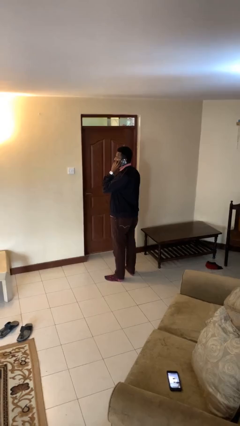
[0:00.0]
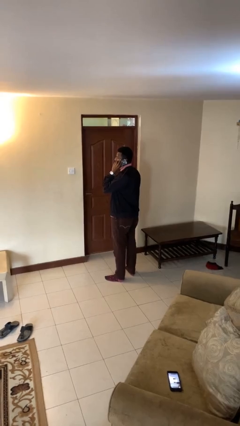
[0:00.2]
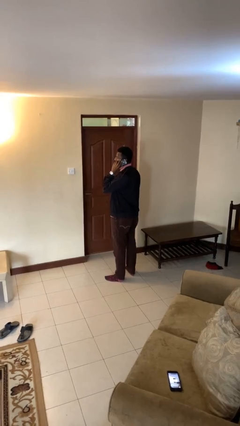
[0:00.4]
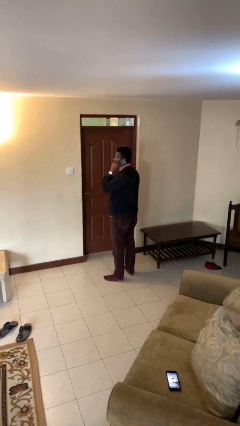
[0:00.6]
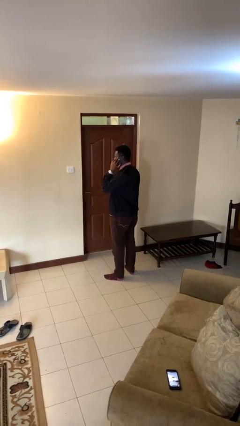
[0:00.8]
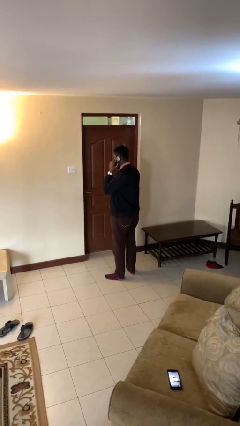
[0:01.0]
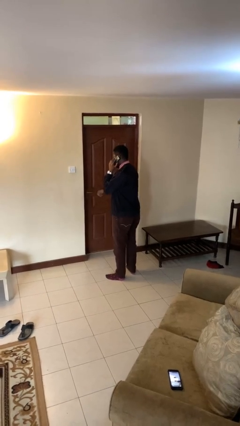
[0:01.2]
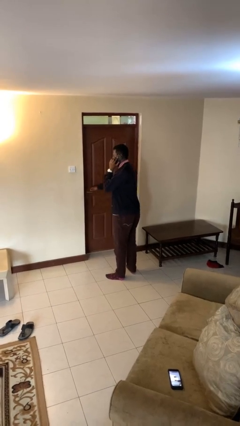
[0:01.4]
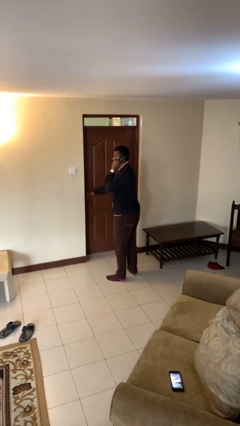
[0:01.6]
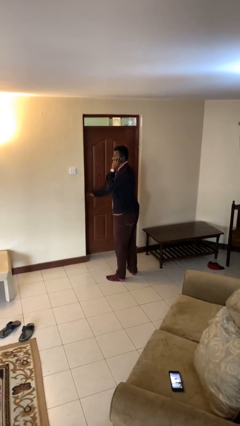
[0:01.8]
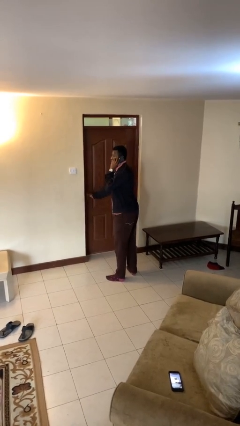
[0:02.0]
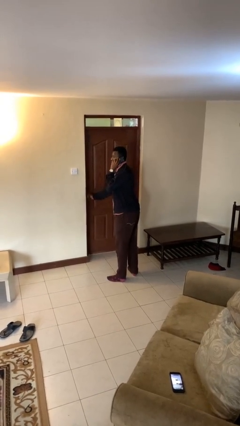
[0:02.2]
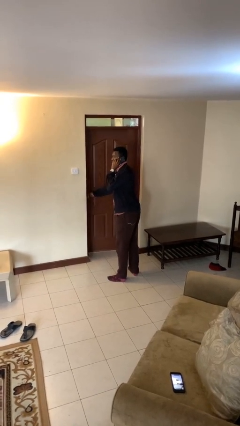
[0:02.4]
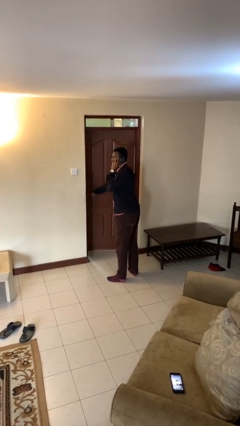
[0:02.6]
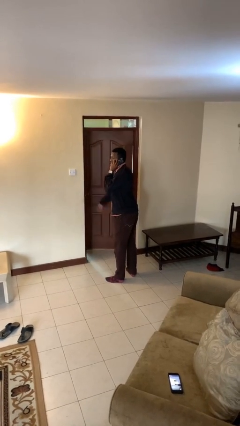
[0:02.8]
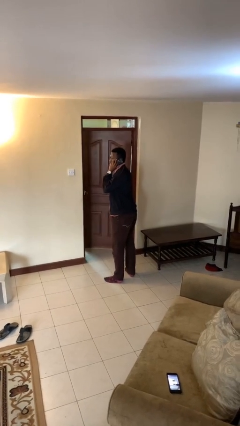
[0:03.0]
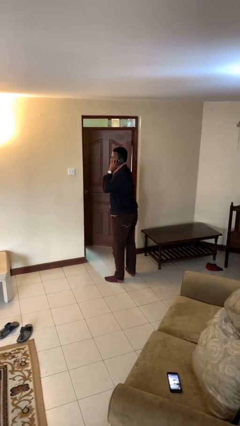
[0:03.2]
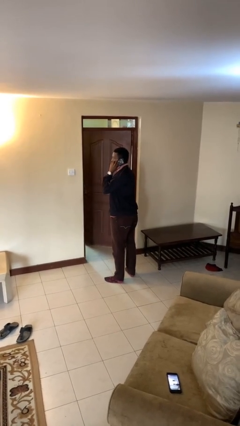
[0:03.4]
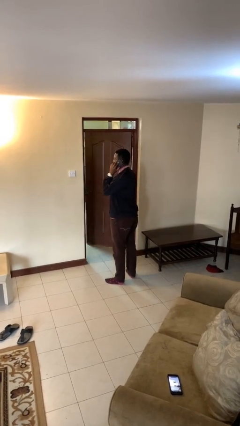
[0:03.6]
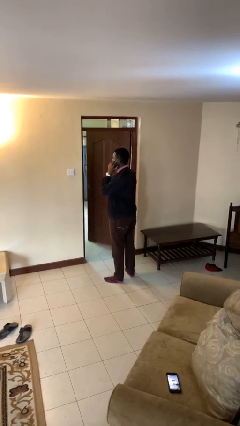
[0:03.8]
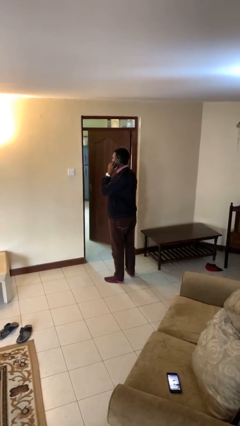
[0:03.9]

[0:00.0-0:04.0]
person opens facility door

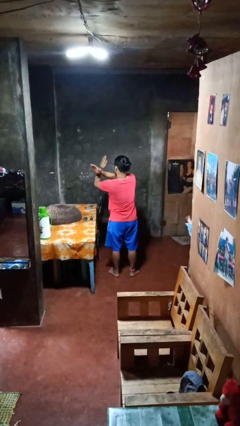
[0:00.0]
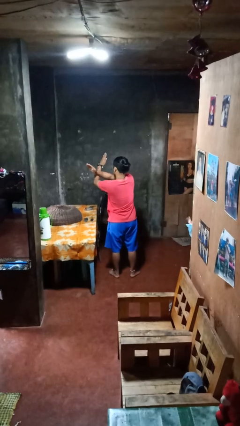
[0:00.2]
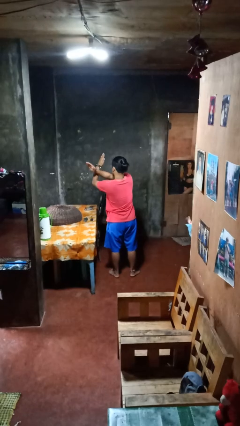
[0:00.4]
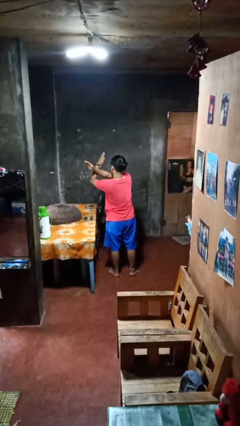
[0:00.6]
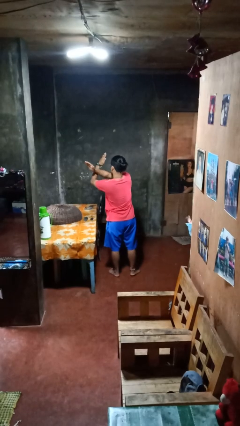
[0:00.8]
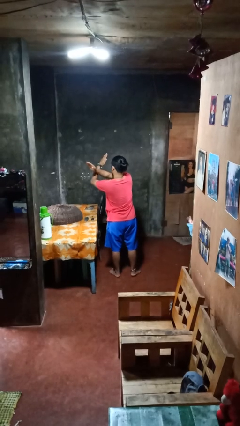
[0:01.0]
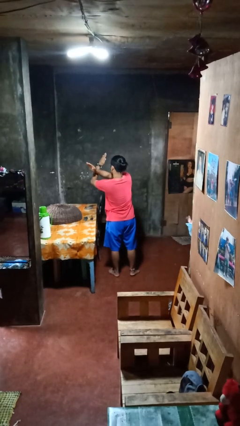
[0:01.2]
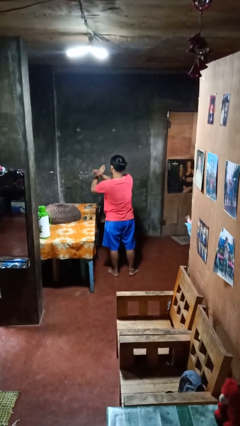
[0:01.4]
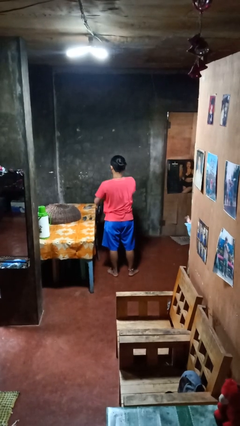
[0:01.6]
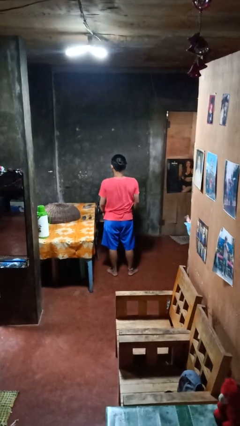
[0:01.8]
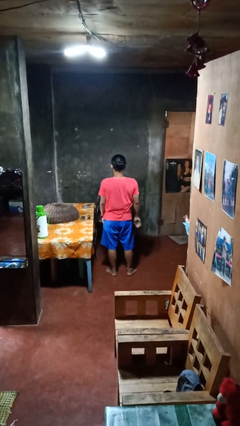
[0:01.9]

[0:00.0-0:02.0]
person gestures arms x

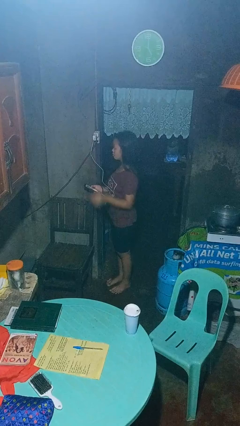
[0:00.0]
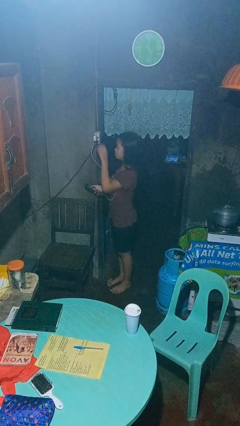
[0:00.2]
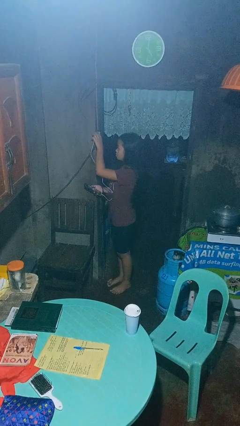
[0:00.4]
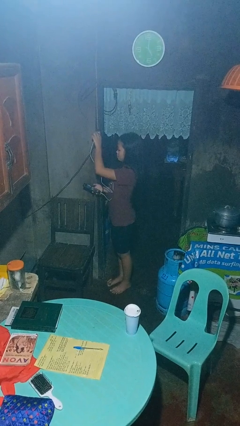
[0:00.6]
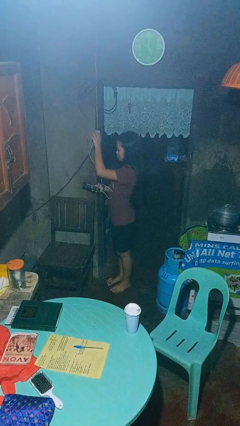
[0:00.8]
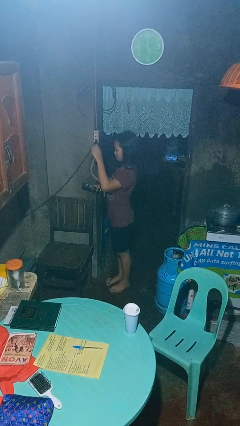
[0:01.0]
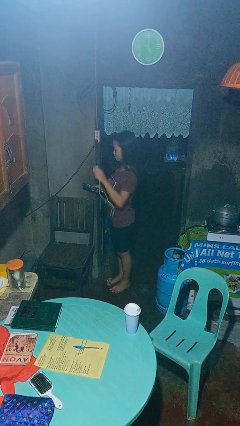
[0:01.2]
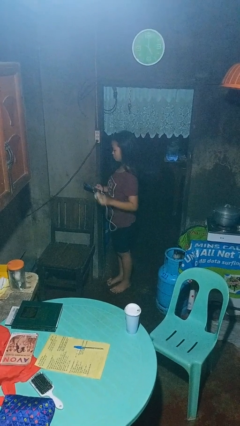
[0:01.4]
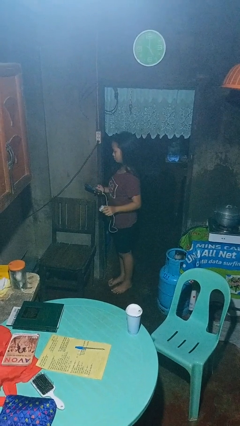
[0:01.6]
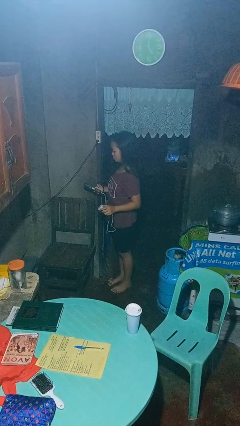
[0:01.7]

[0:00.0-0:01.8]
person unplugs from electrical socket

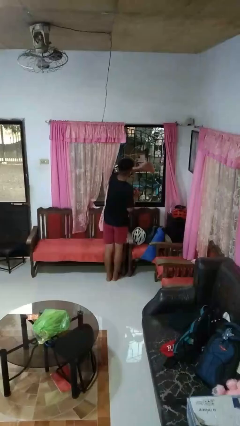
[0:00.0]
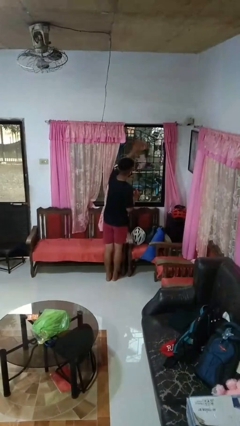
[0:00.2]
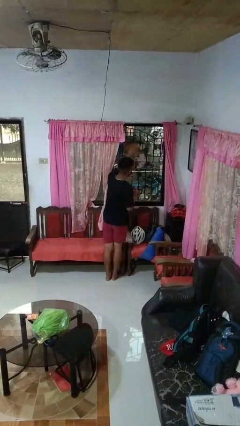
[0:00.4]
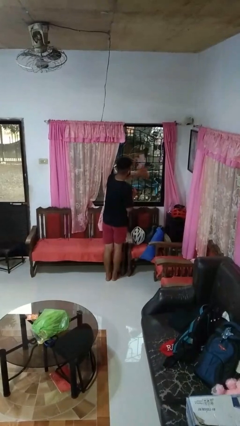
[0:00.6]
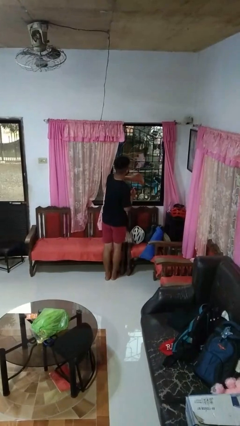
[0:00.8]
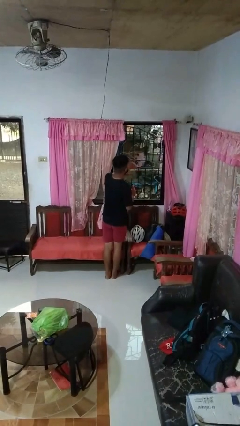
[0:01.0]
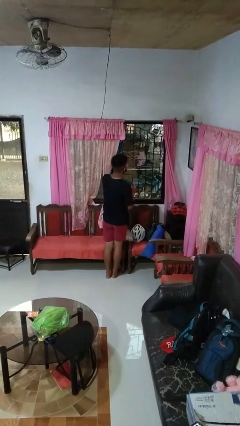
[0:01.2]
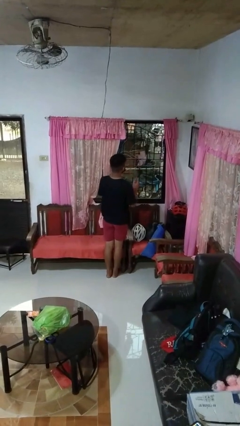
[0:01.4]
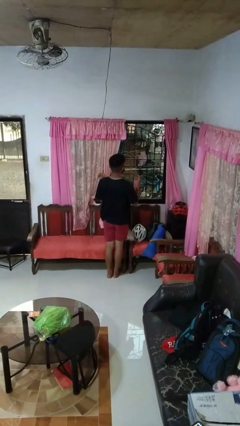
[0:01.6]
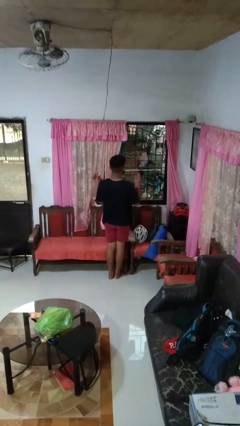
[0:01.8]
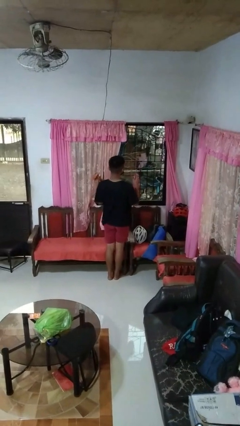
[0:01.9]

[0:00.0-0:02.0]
person washes window

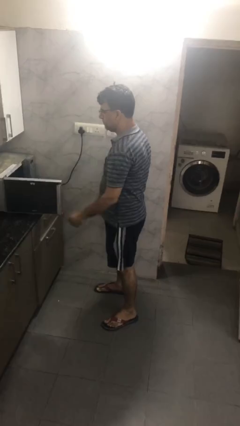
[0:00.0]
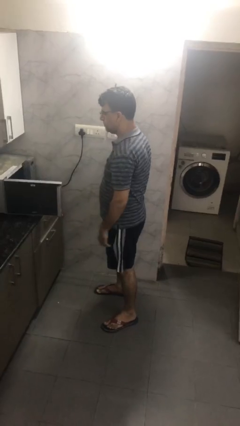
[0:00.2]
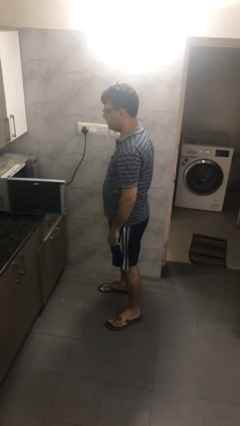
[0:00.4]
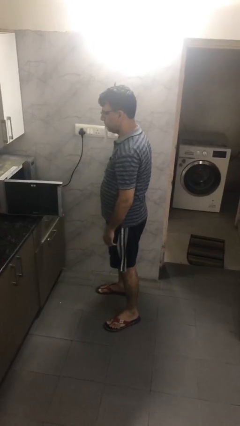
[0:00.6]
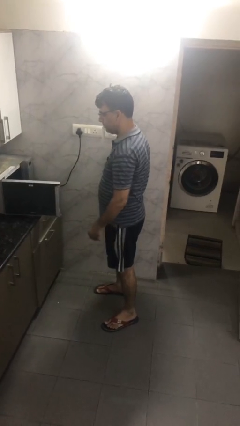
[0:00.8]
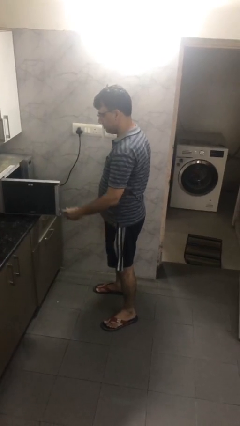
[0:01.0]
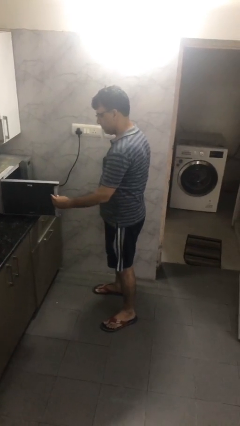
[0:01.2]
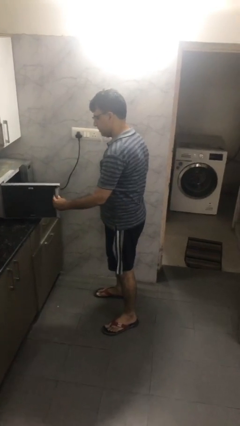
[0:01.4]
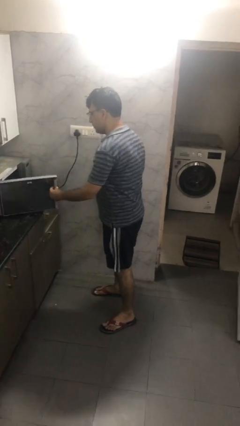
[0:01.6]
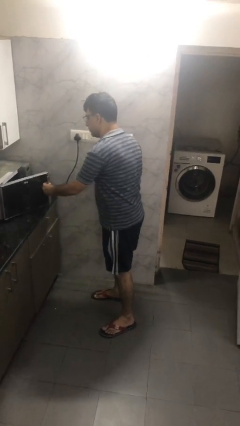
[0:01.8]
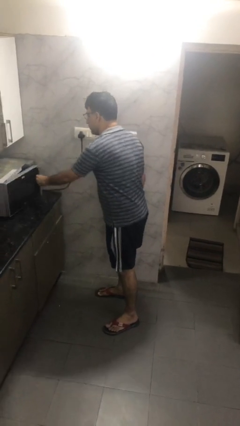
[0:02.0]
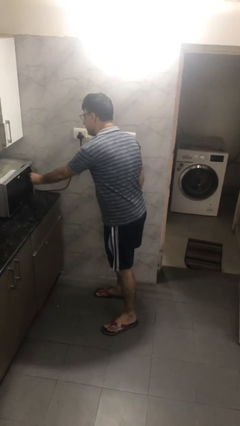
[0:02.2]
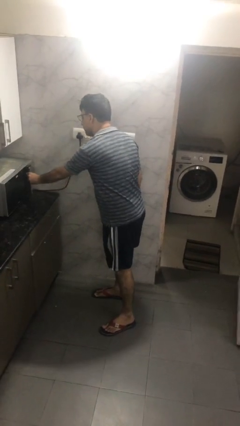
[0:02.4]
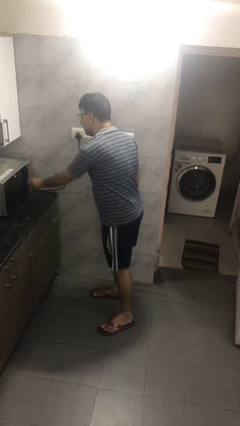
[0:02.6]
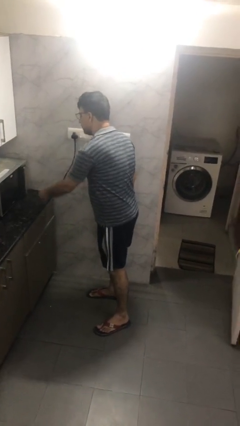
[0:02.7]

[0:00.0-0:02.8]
person closes microwave

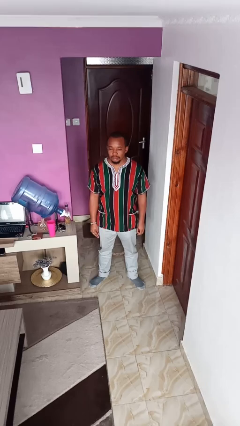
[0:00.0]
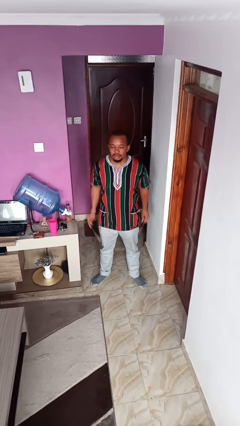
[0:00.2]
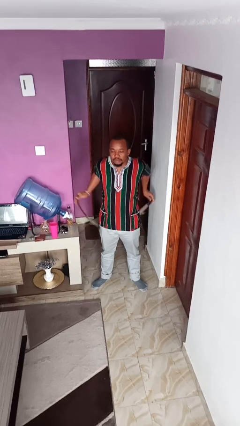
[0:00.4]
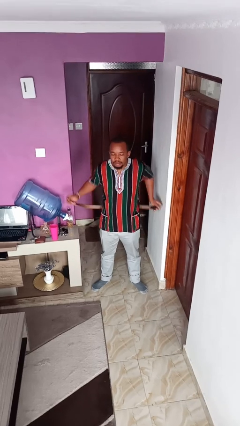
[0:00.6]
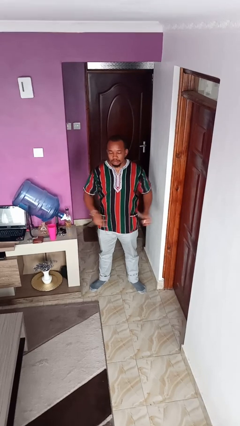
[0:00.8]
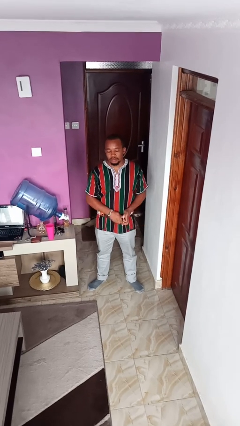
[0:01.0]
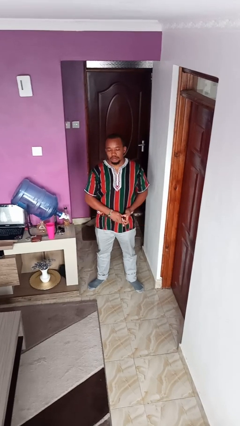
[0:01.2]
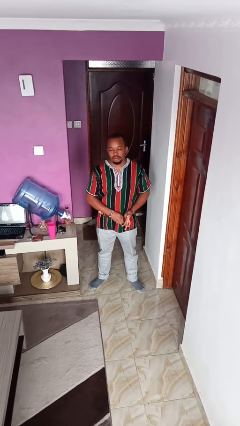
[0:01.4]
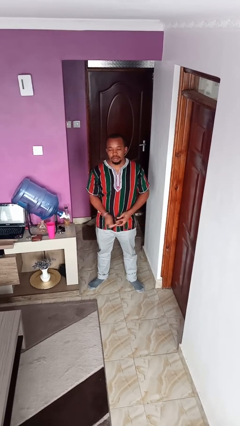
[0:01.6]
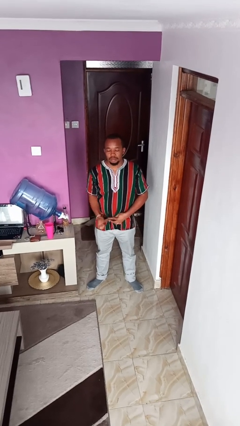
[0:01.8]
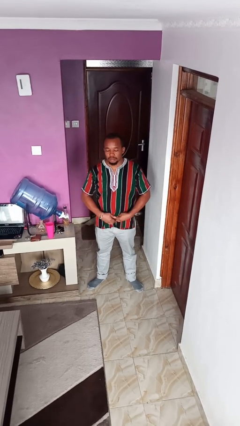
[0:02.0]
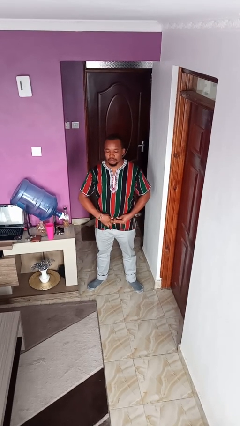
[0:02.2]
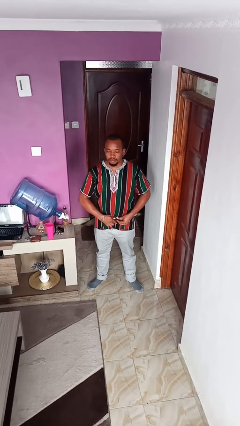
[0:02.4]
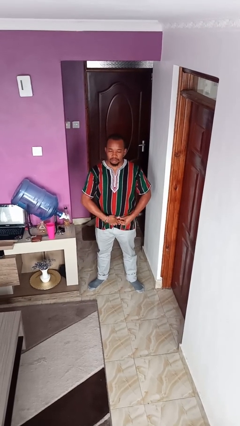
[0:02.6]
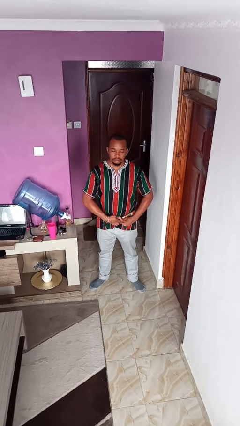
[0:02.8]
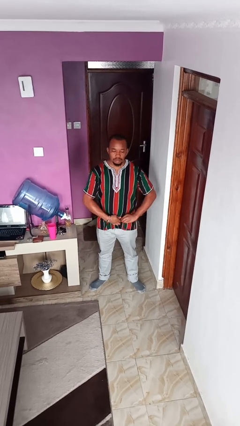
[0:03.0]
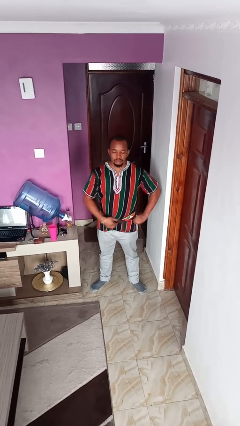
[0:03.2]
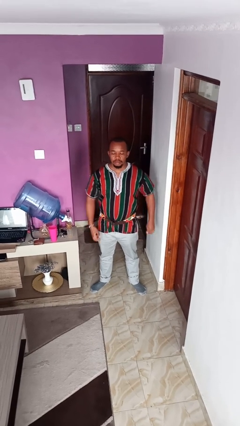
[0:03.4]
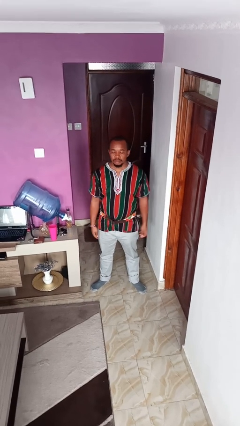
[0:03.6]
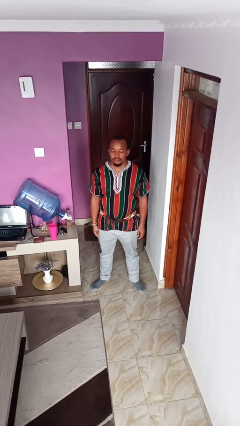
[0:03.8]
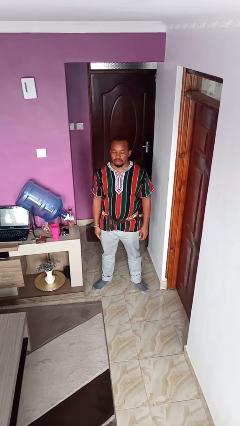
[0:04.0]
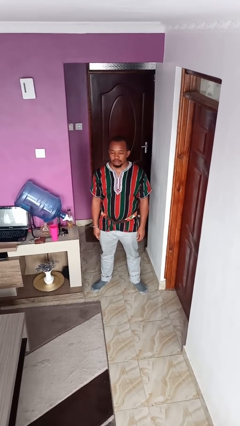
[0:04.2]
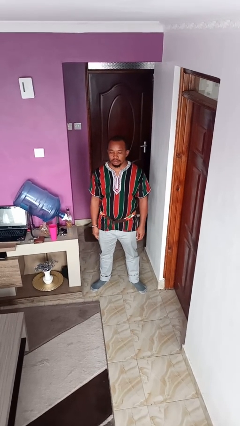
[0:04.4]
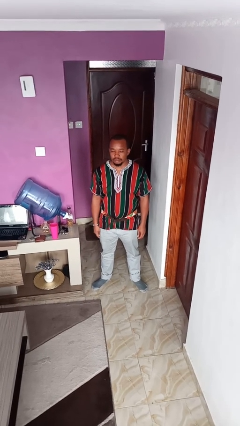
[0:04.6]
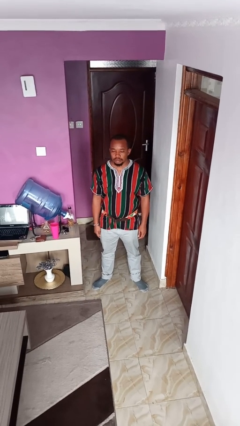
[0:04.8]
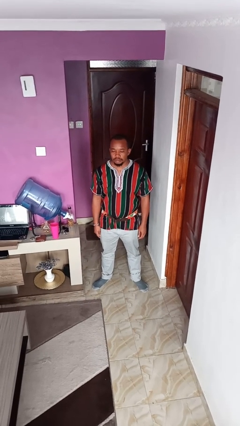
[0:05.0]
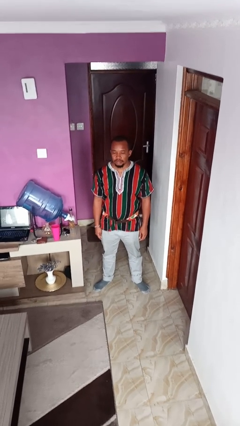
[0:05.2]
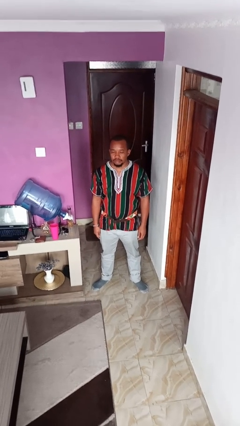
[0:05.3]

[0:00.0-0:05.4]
person puts on belt
